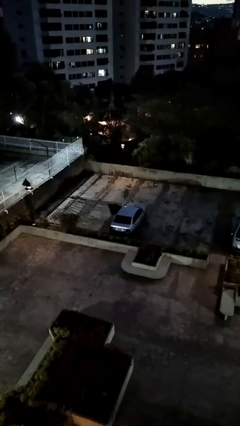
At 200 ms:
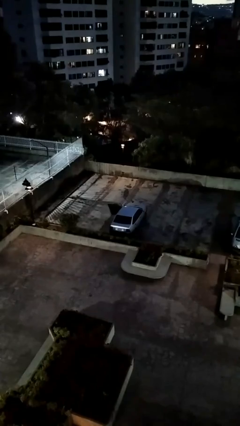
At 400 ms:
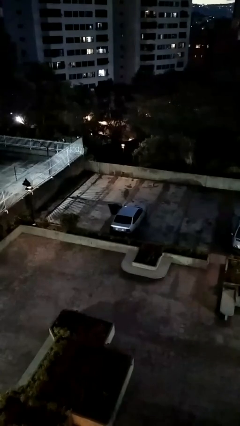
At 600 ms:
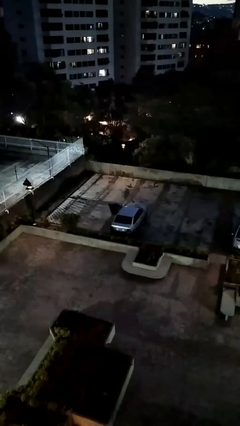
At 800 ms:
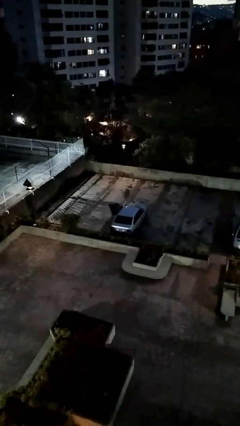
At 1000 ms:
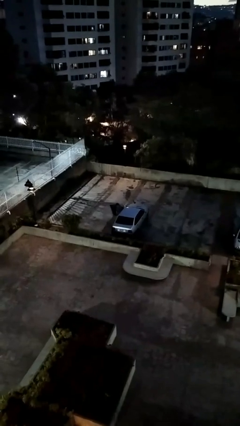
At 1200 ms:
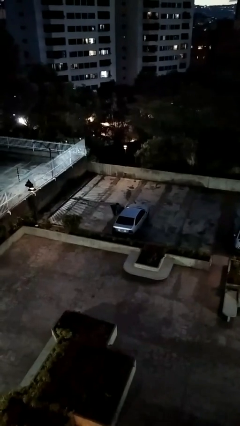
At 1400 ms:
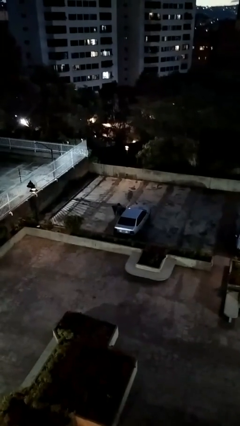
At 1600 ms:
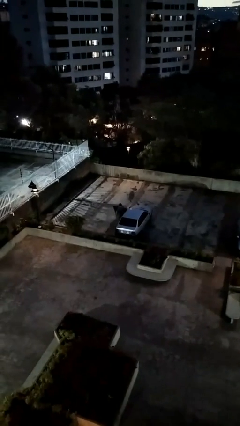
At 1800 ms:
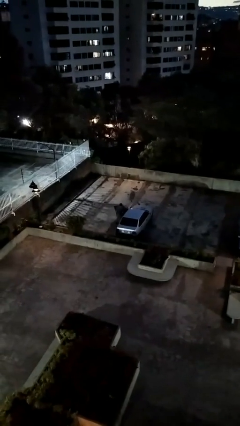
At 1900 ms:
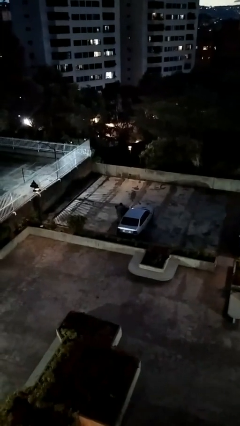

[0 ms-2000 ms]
person exits car

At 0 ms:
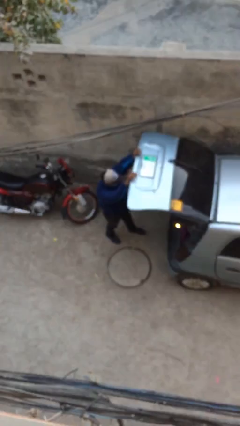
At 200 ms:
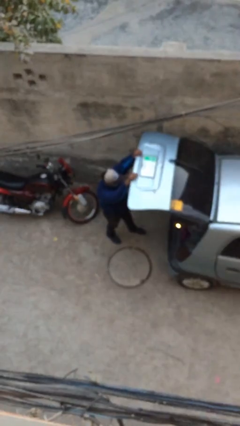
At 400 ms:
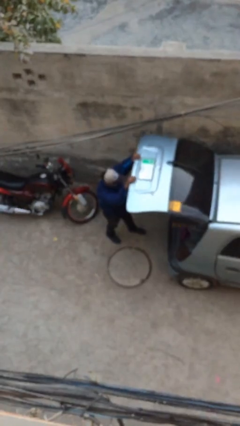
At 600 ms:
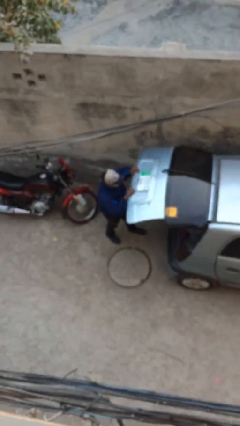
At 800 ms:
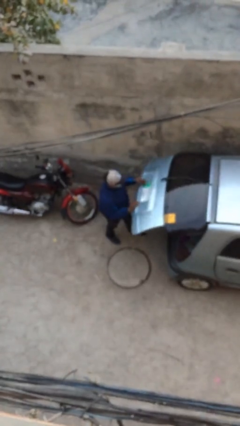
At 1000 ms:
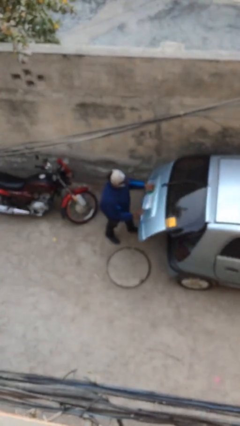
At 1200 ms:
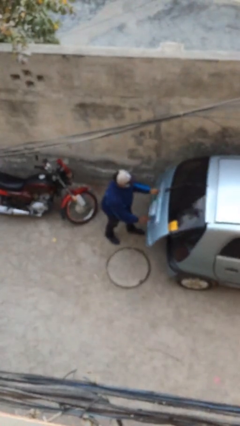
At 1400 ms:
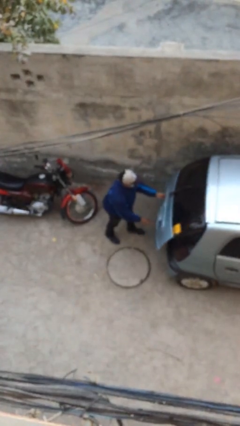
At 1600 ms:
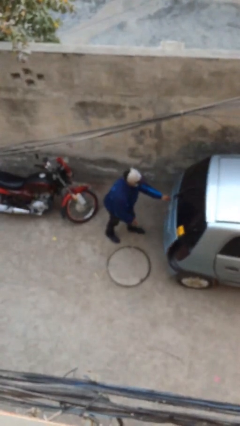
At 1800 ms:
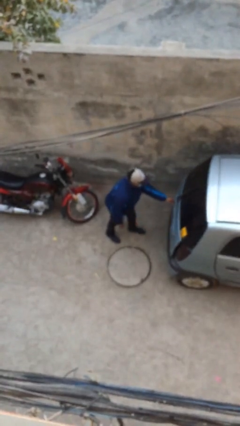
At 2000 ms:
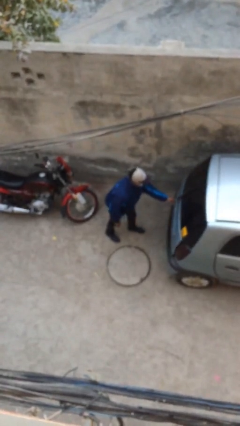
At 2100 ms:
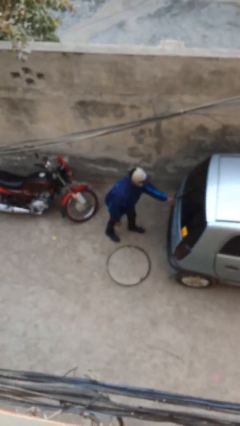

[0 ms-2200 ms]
person closes car trunk

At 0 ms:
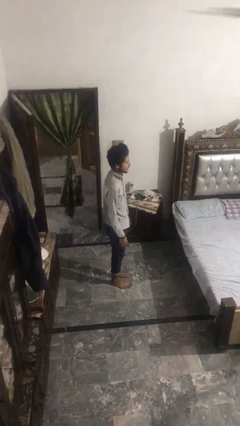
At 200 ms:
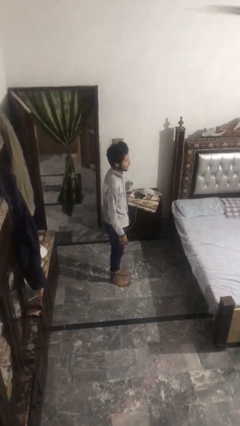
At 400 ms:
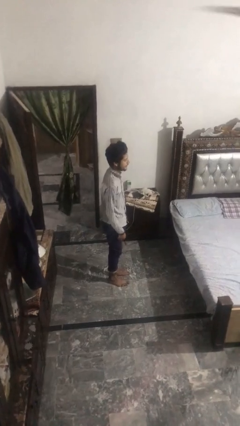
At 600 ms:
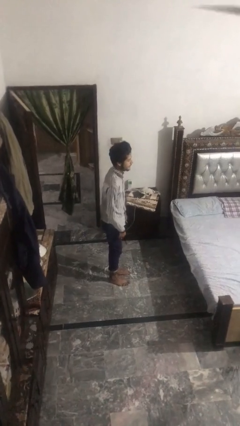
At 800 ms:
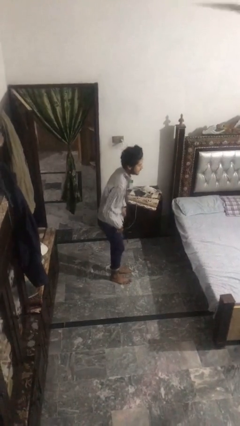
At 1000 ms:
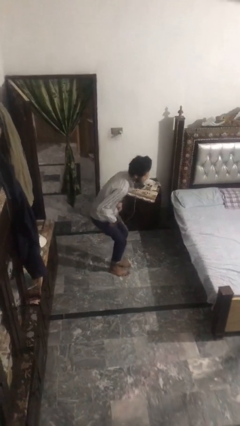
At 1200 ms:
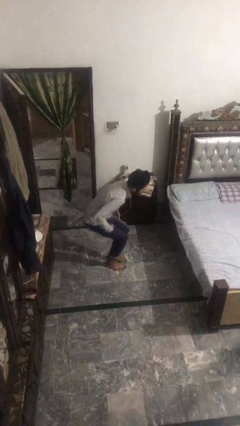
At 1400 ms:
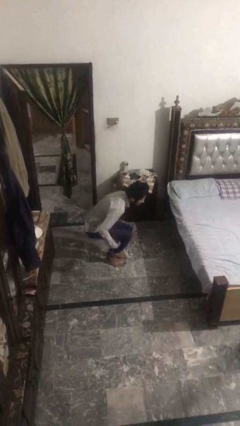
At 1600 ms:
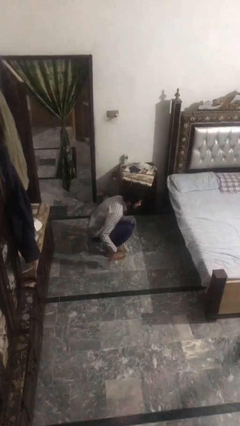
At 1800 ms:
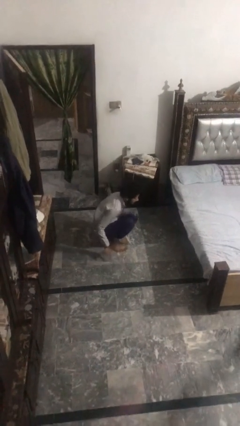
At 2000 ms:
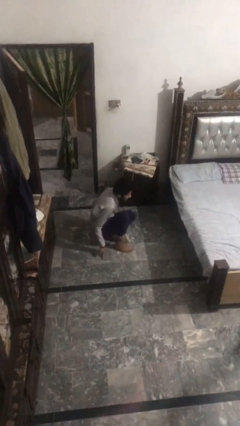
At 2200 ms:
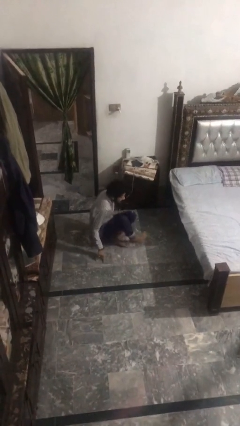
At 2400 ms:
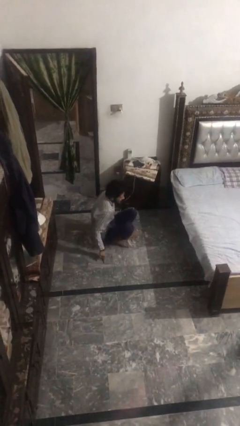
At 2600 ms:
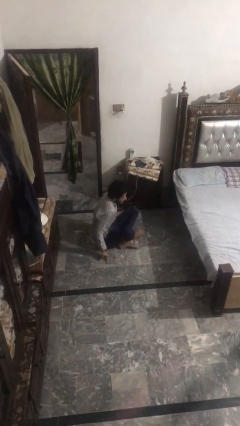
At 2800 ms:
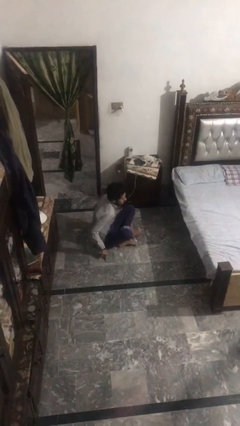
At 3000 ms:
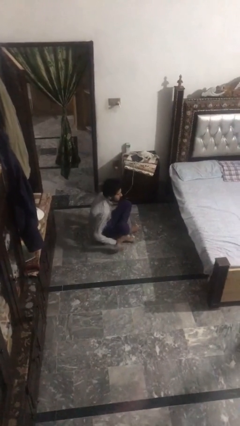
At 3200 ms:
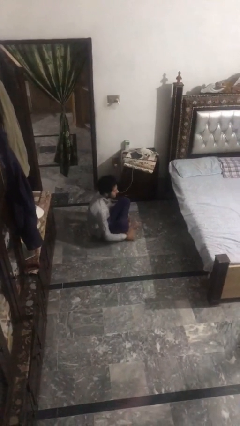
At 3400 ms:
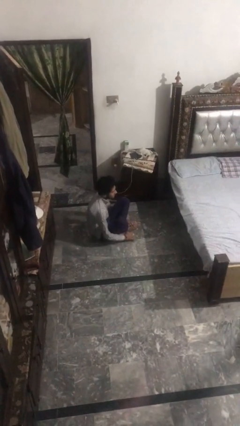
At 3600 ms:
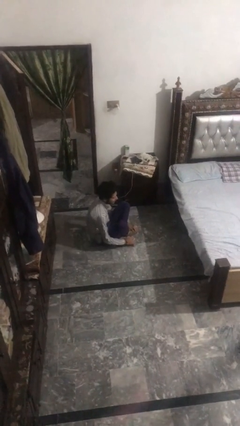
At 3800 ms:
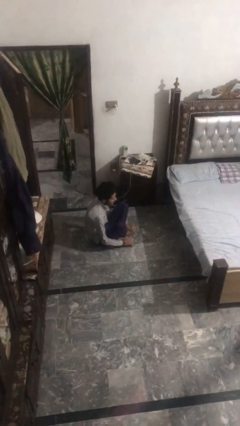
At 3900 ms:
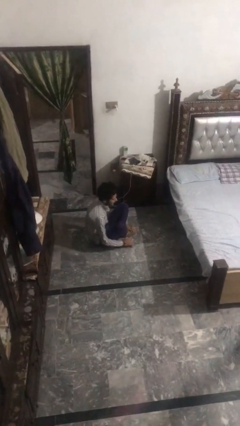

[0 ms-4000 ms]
person sits crisscross

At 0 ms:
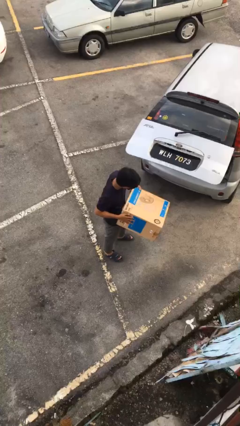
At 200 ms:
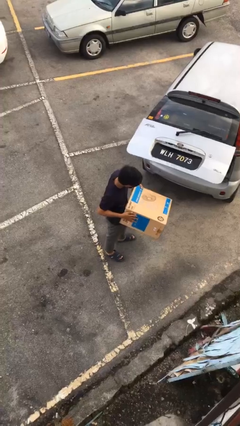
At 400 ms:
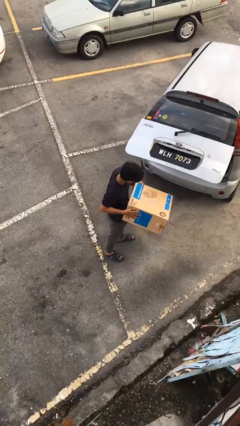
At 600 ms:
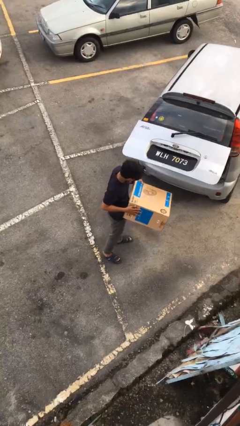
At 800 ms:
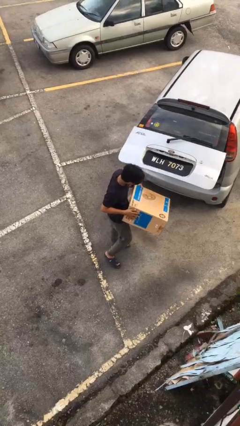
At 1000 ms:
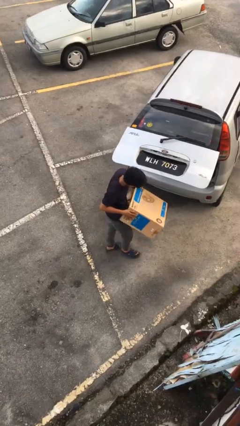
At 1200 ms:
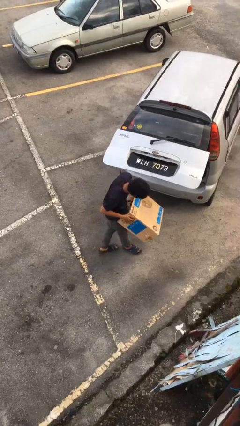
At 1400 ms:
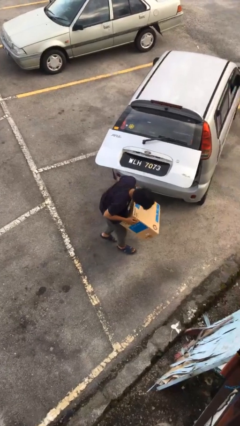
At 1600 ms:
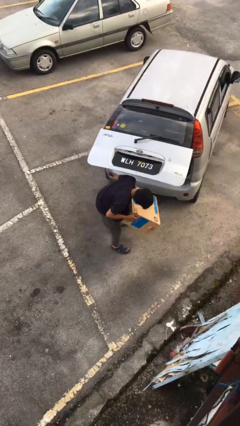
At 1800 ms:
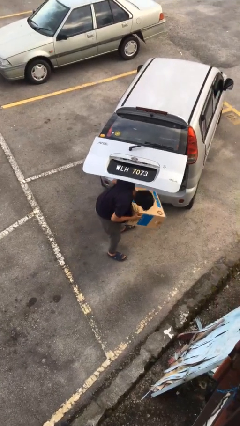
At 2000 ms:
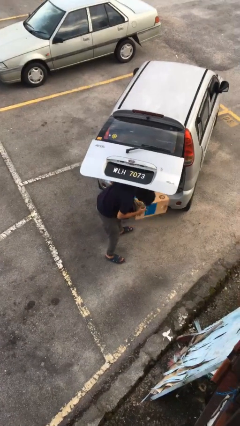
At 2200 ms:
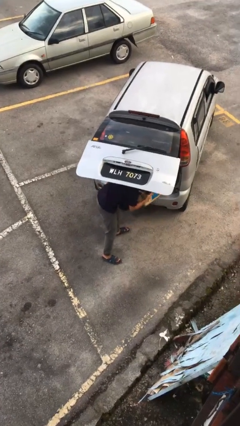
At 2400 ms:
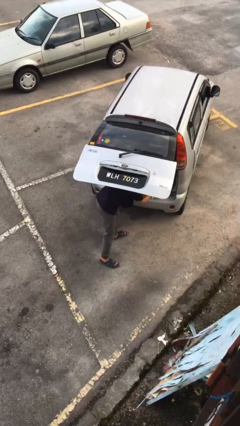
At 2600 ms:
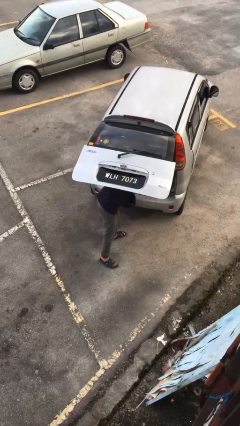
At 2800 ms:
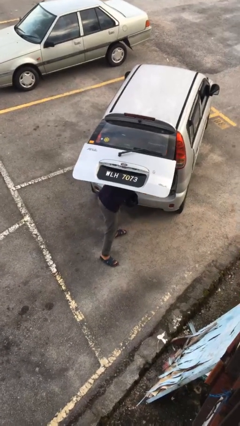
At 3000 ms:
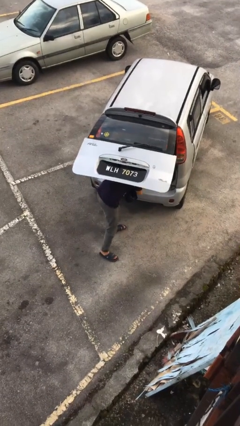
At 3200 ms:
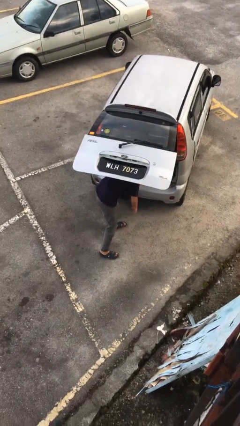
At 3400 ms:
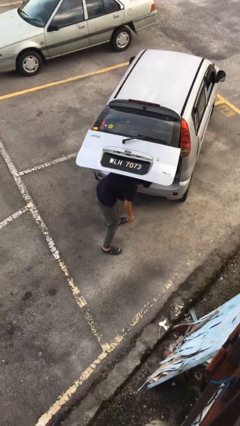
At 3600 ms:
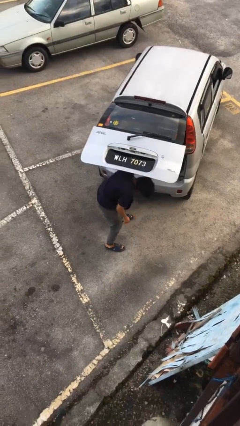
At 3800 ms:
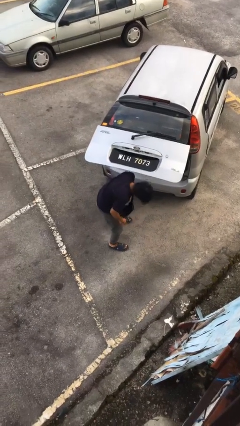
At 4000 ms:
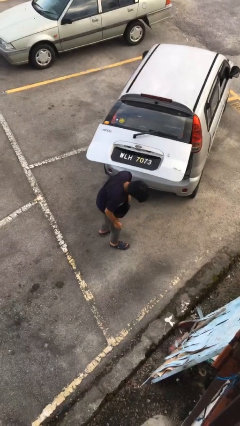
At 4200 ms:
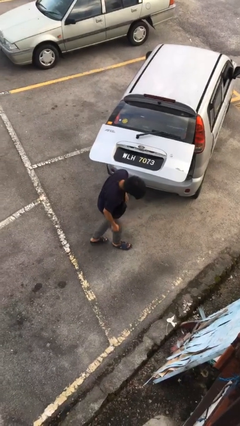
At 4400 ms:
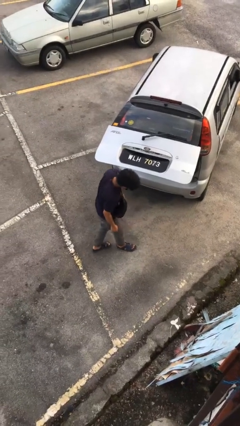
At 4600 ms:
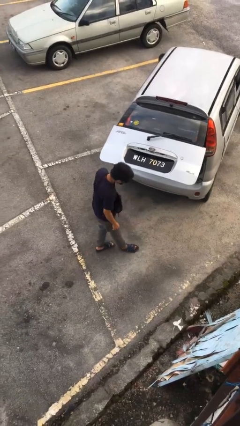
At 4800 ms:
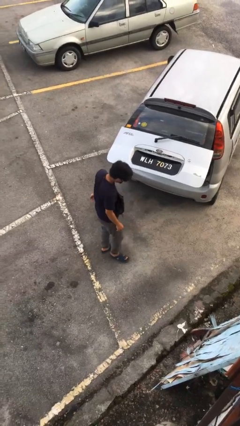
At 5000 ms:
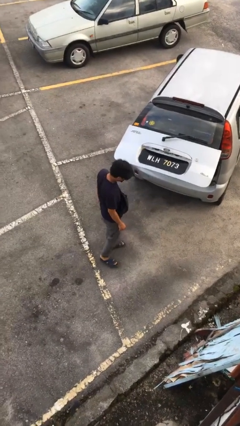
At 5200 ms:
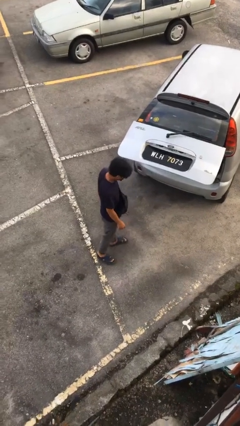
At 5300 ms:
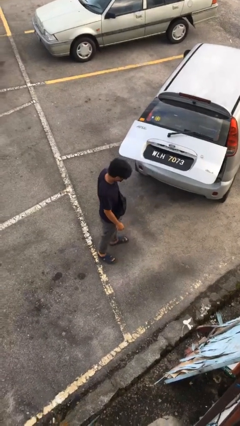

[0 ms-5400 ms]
person loads car

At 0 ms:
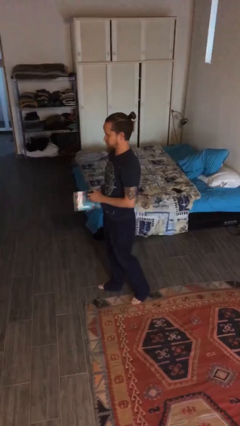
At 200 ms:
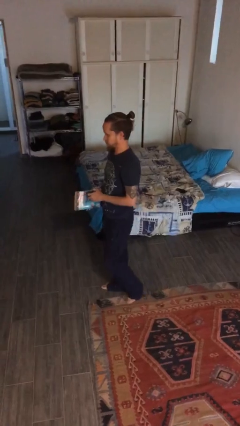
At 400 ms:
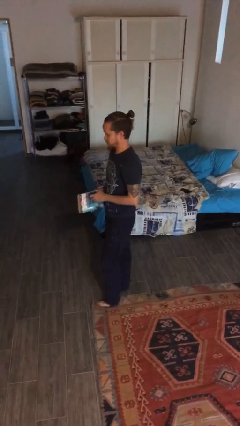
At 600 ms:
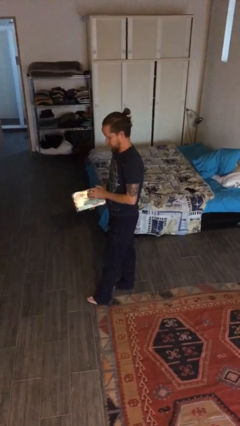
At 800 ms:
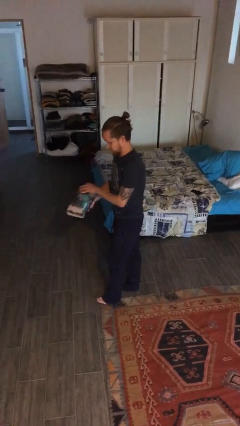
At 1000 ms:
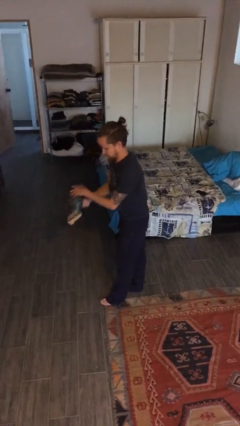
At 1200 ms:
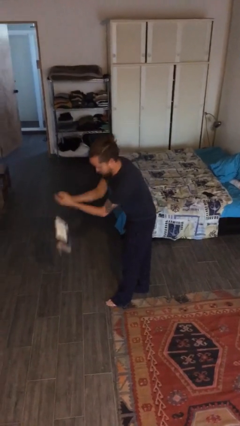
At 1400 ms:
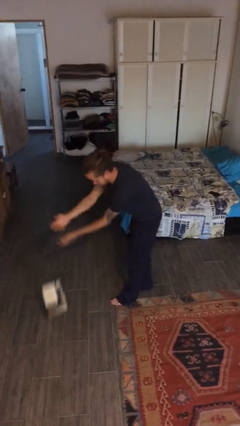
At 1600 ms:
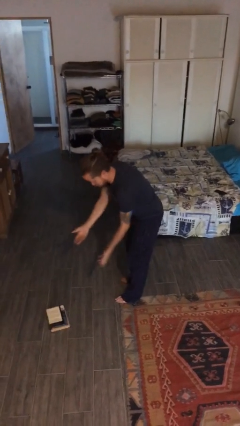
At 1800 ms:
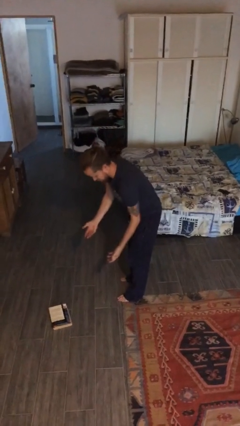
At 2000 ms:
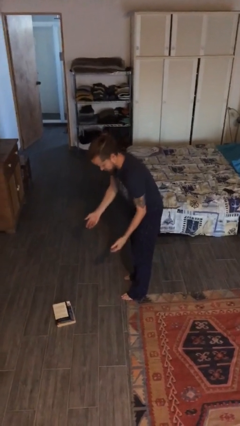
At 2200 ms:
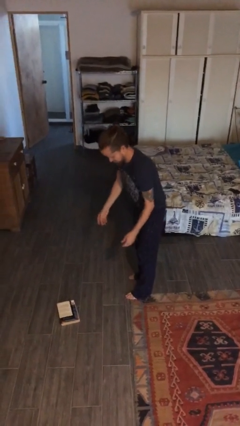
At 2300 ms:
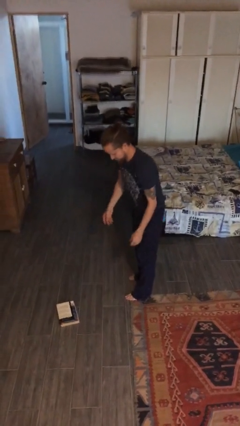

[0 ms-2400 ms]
person drops object

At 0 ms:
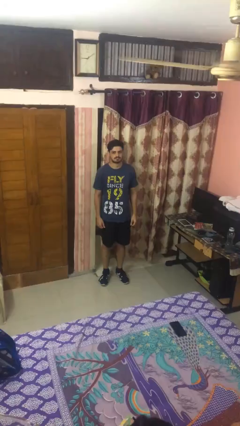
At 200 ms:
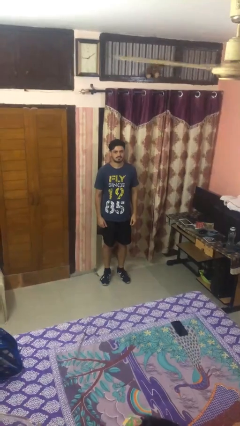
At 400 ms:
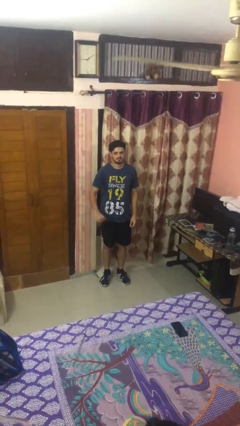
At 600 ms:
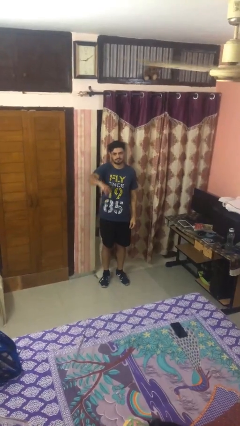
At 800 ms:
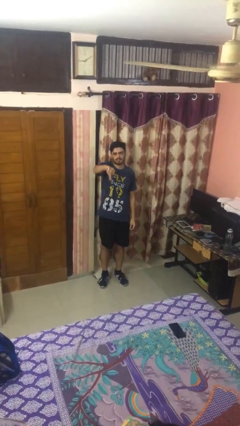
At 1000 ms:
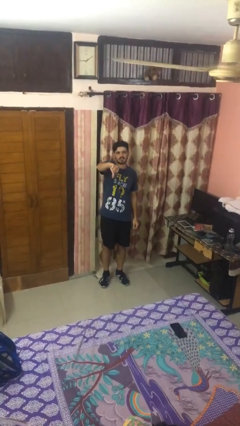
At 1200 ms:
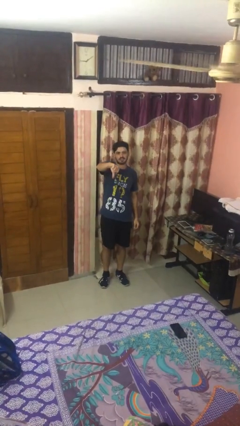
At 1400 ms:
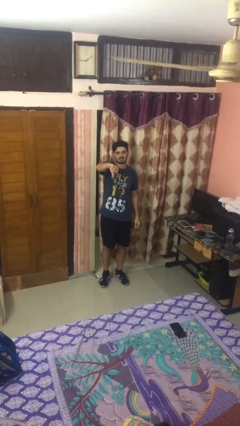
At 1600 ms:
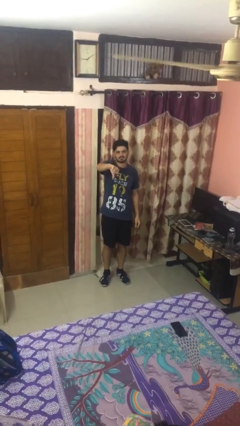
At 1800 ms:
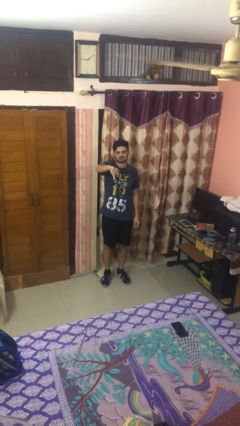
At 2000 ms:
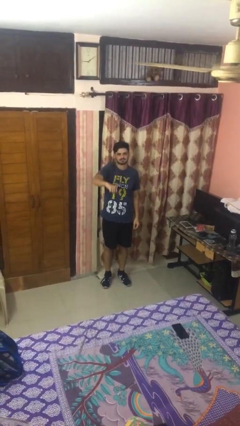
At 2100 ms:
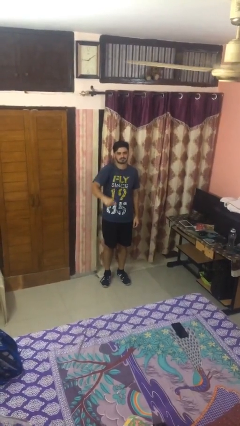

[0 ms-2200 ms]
person gestures thumbs down
